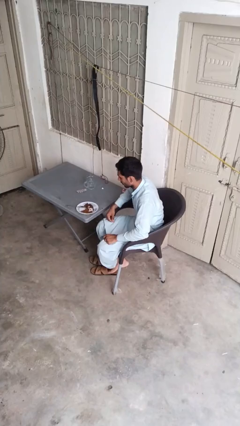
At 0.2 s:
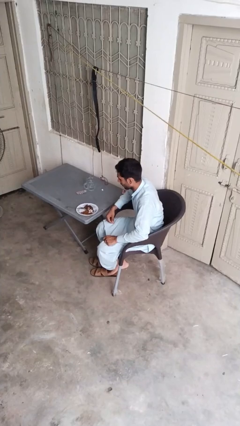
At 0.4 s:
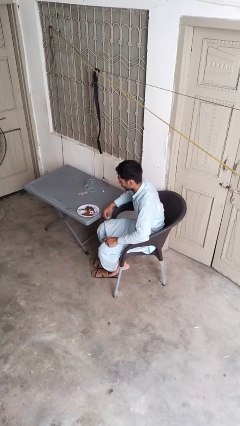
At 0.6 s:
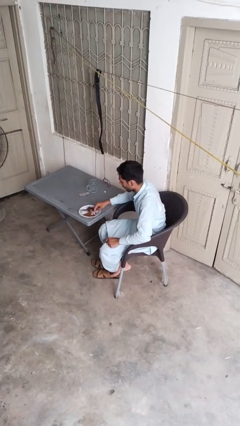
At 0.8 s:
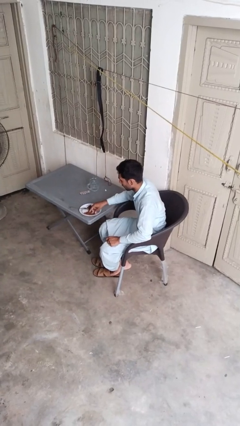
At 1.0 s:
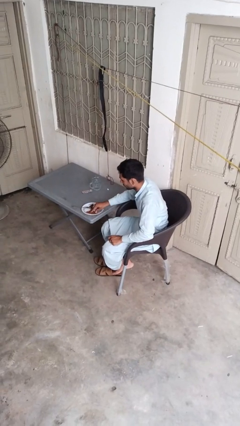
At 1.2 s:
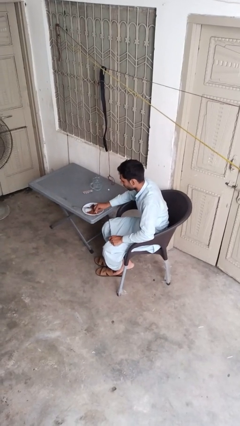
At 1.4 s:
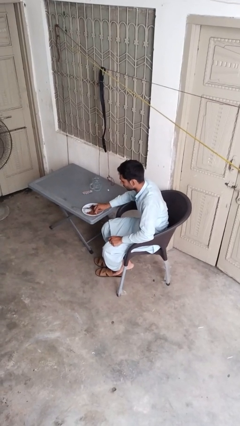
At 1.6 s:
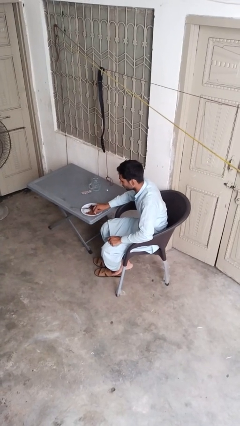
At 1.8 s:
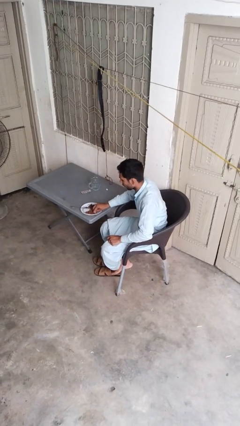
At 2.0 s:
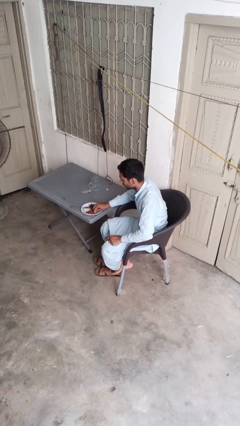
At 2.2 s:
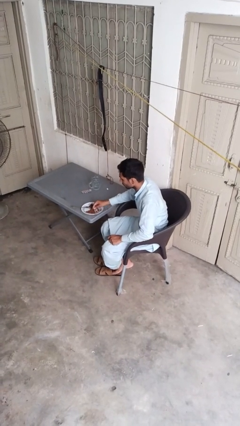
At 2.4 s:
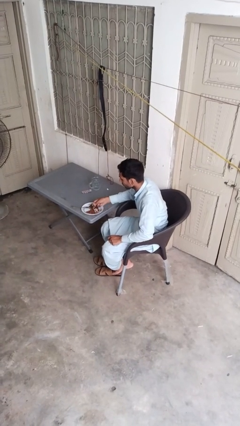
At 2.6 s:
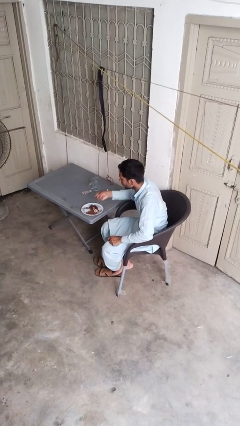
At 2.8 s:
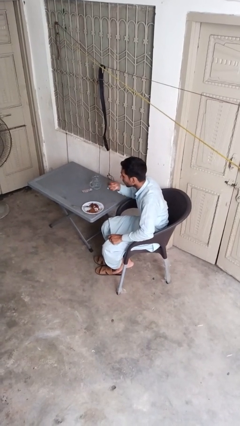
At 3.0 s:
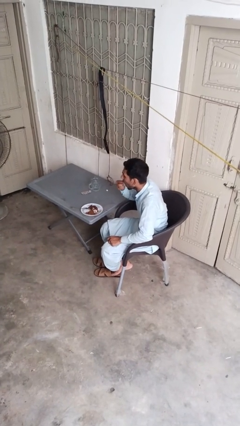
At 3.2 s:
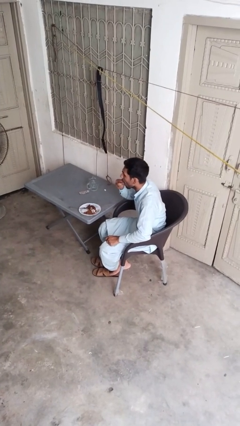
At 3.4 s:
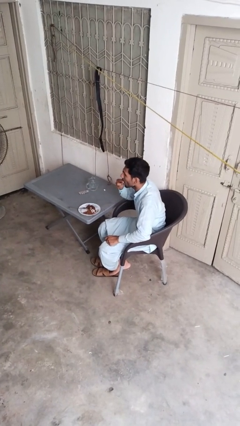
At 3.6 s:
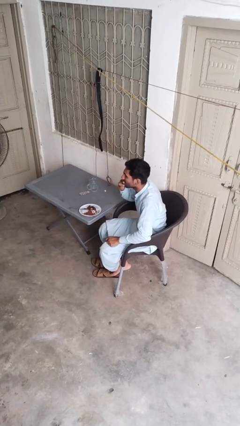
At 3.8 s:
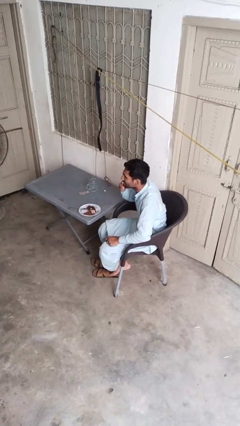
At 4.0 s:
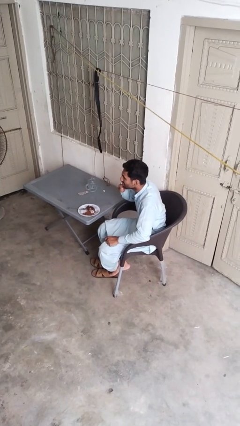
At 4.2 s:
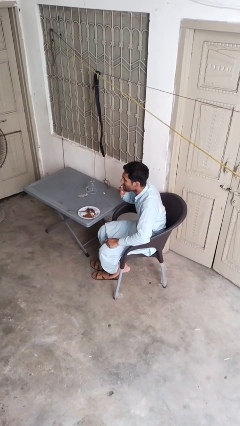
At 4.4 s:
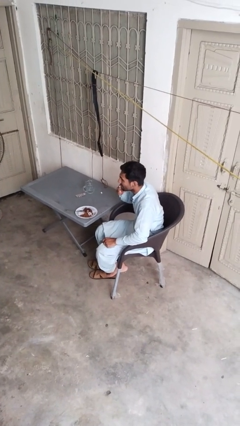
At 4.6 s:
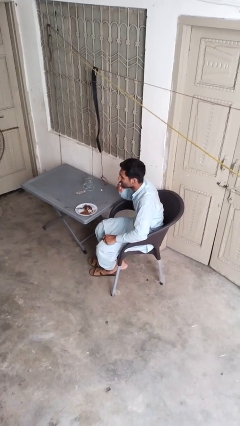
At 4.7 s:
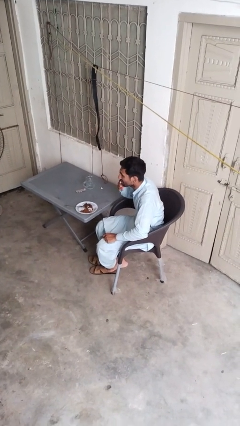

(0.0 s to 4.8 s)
person eats with hands

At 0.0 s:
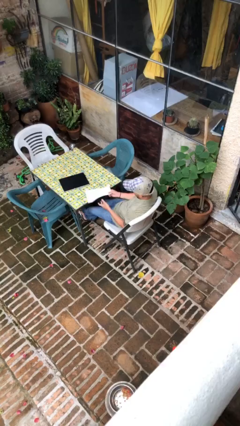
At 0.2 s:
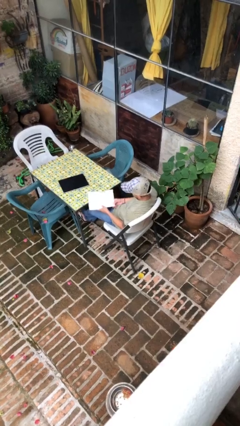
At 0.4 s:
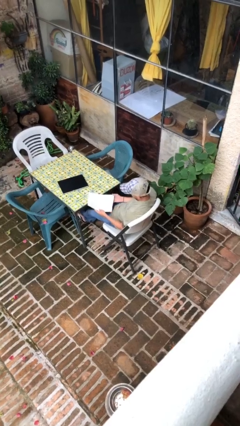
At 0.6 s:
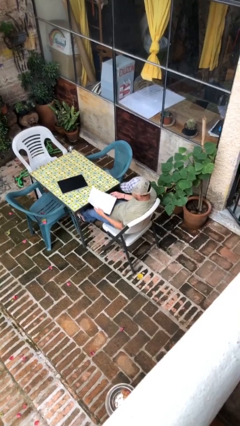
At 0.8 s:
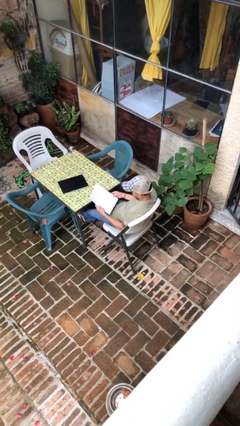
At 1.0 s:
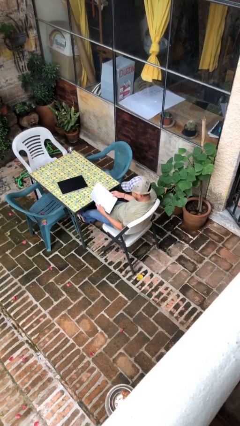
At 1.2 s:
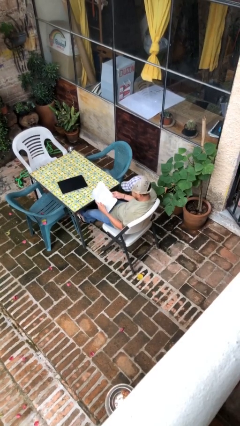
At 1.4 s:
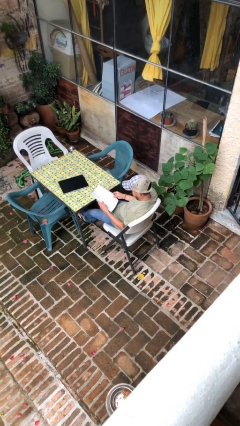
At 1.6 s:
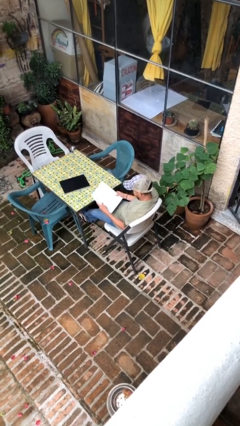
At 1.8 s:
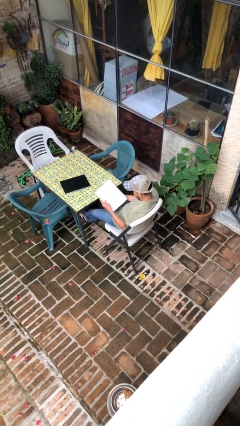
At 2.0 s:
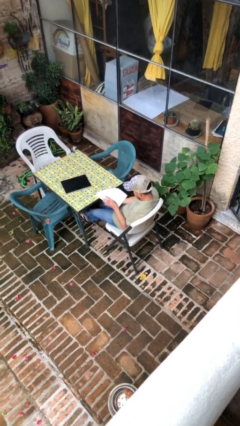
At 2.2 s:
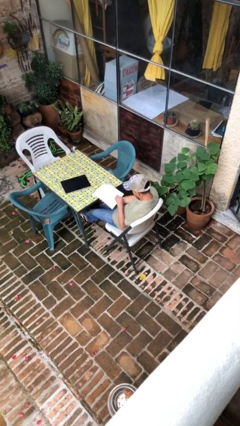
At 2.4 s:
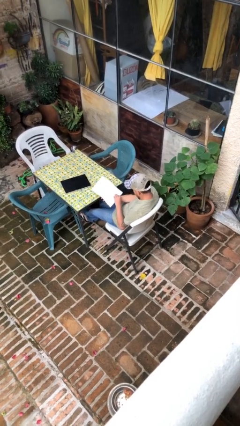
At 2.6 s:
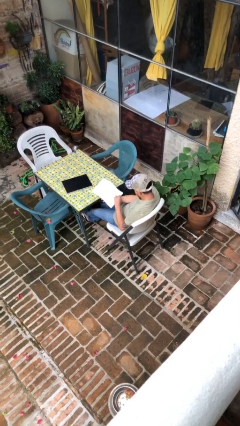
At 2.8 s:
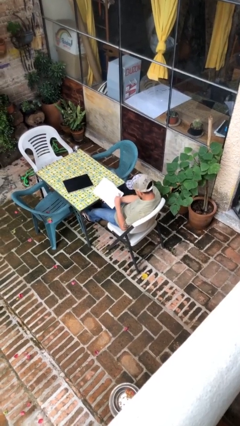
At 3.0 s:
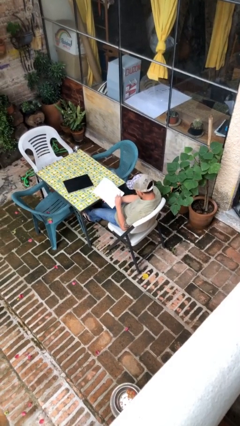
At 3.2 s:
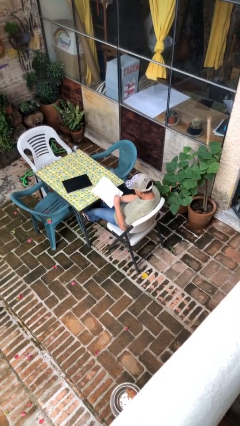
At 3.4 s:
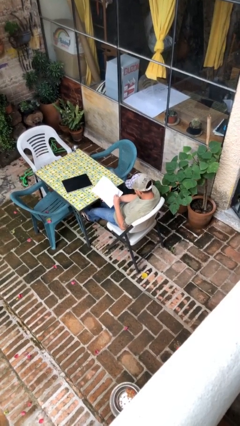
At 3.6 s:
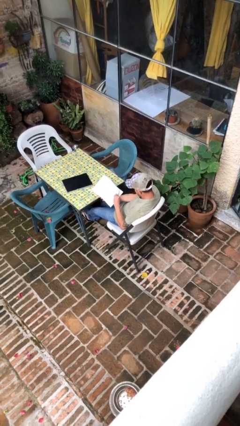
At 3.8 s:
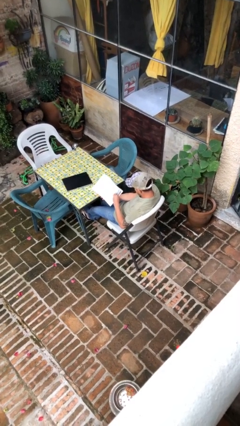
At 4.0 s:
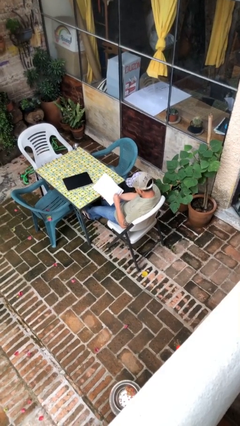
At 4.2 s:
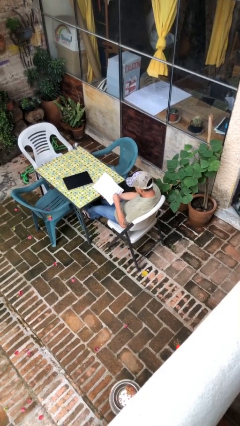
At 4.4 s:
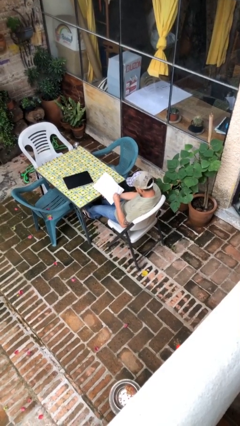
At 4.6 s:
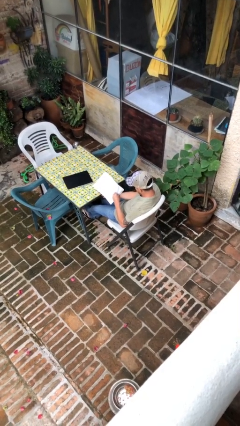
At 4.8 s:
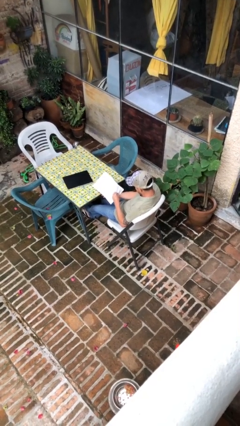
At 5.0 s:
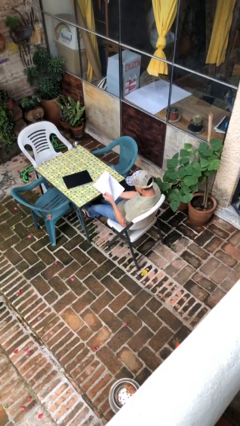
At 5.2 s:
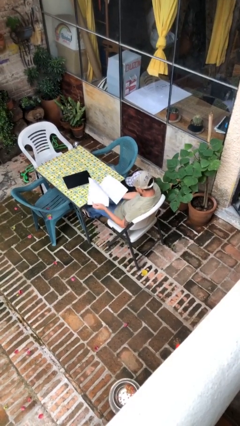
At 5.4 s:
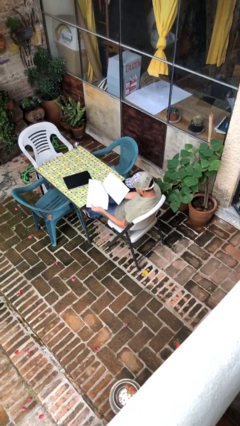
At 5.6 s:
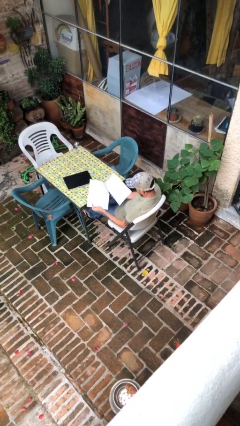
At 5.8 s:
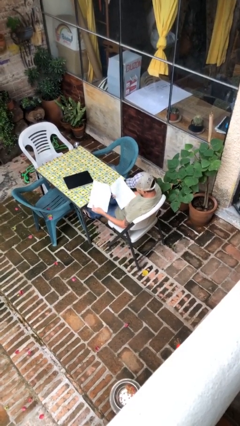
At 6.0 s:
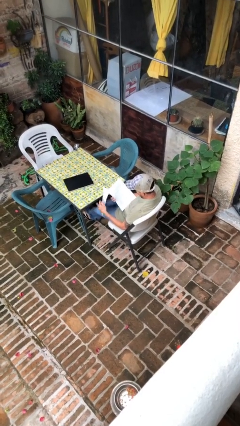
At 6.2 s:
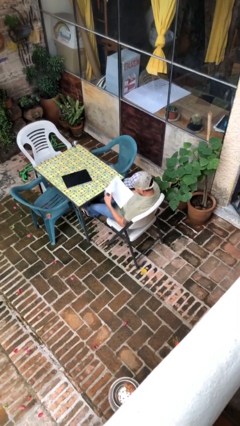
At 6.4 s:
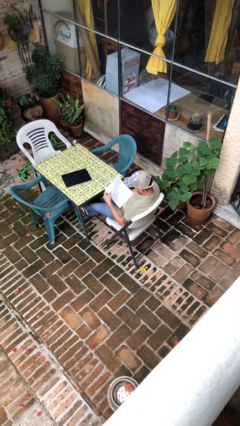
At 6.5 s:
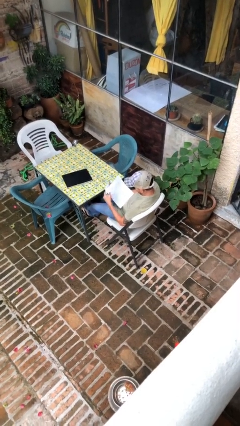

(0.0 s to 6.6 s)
person reads document

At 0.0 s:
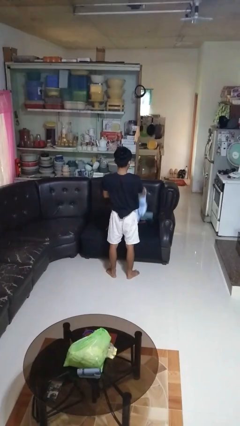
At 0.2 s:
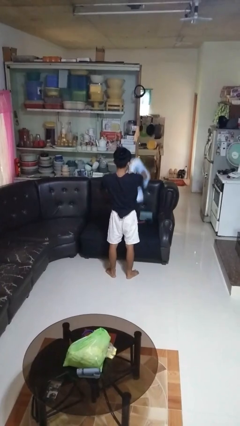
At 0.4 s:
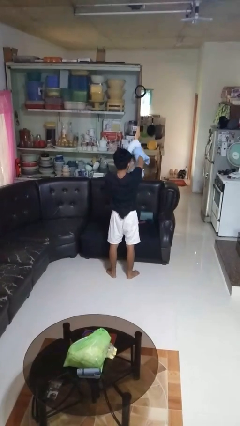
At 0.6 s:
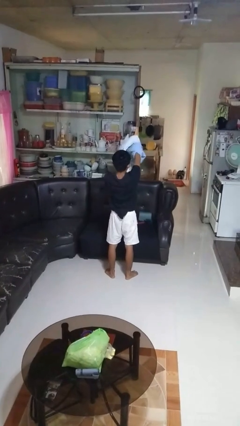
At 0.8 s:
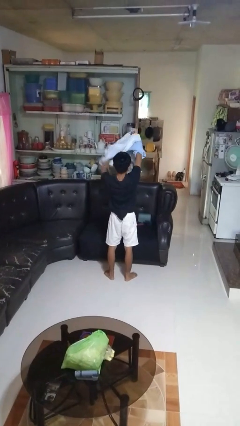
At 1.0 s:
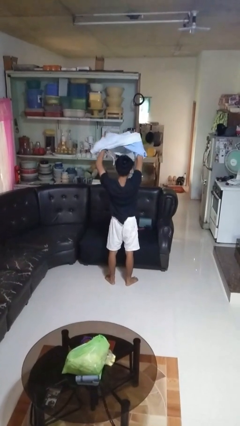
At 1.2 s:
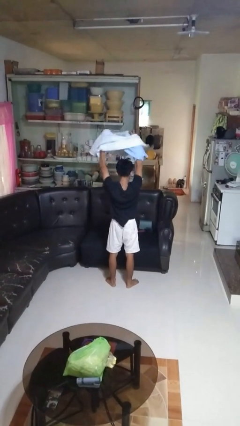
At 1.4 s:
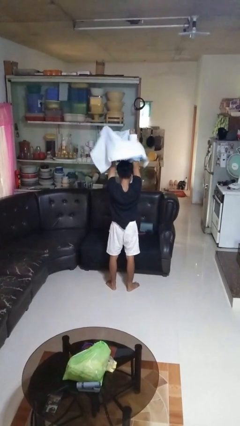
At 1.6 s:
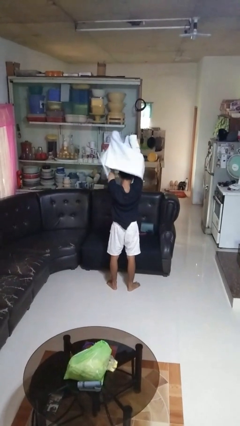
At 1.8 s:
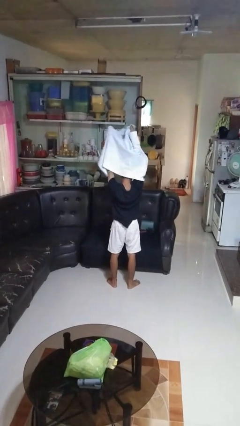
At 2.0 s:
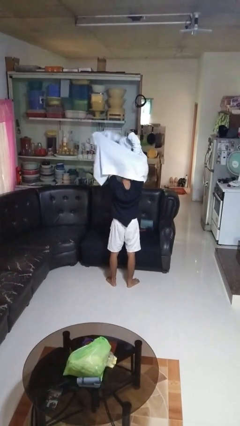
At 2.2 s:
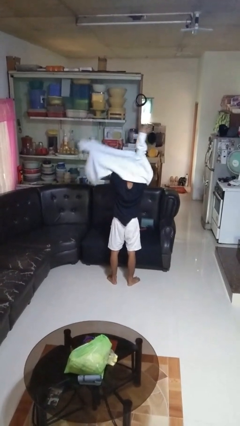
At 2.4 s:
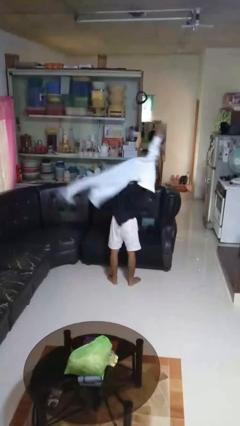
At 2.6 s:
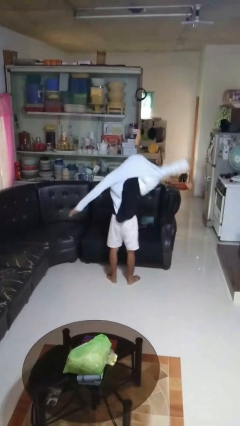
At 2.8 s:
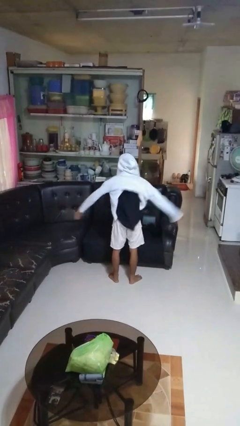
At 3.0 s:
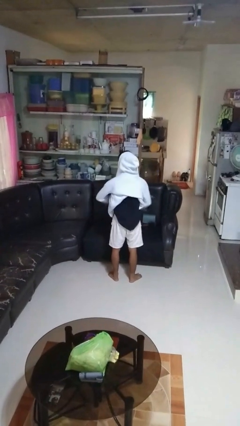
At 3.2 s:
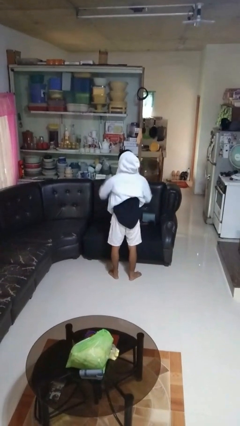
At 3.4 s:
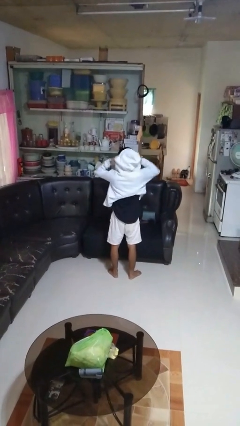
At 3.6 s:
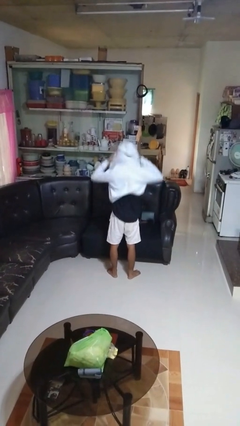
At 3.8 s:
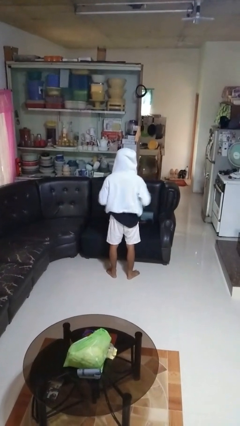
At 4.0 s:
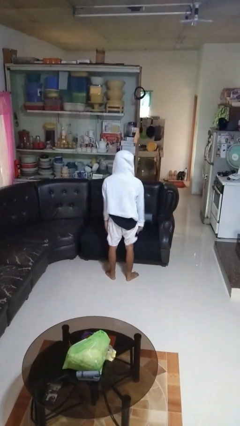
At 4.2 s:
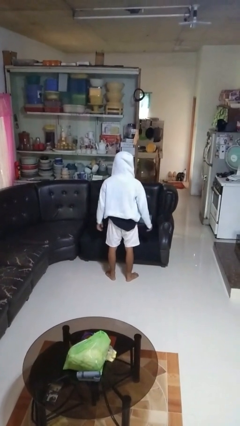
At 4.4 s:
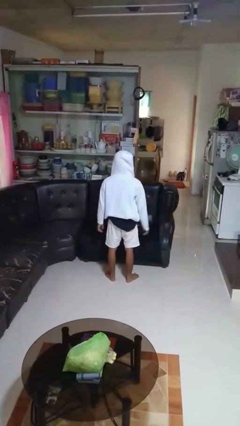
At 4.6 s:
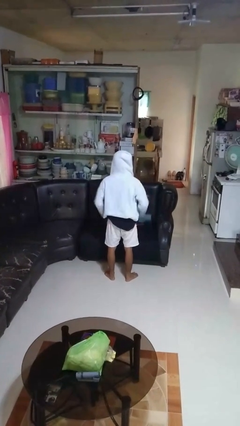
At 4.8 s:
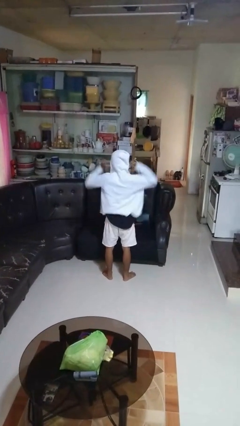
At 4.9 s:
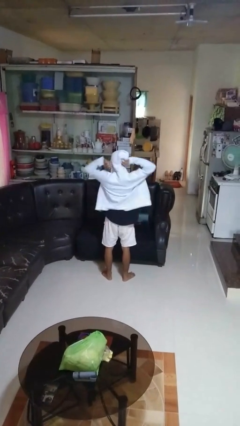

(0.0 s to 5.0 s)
person puts on hoodie

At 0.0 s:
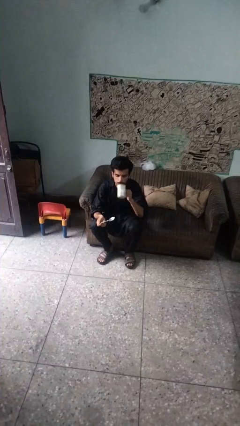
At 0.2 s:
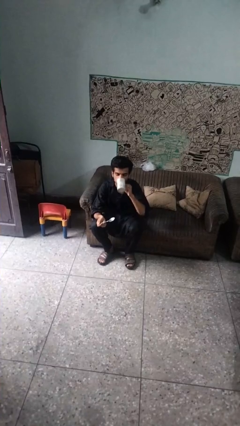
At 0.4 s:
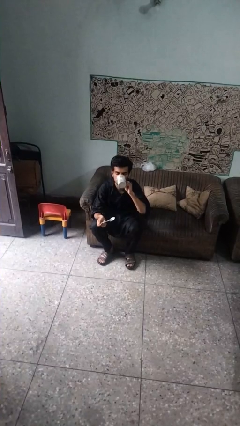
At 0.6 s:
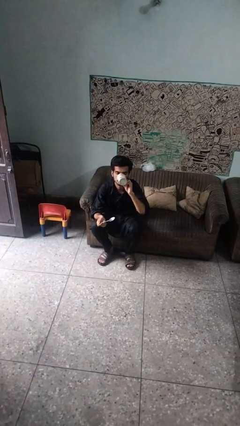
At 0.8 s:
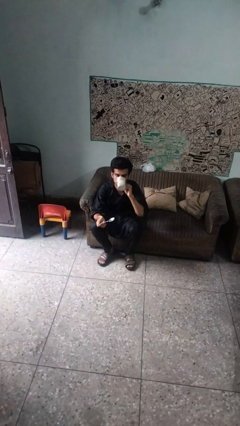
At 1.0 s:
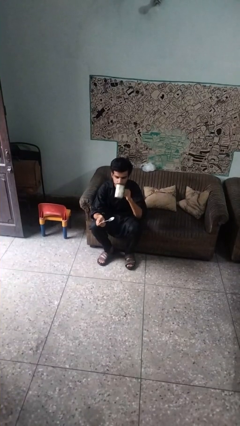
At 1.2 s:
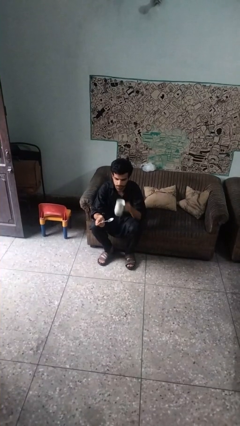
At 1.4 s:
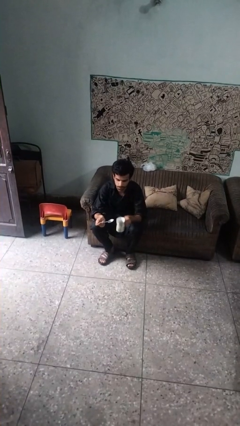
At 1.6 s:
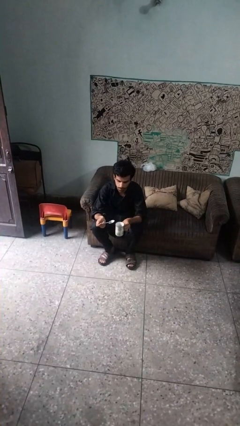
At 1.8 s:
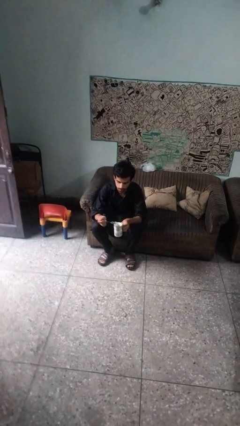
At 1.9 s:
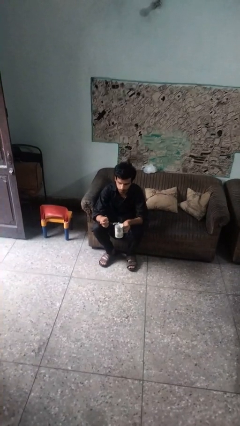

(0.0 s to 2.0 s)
person drinks from mug
